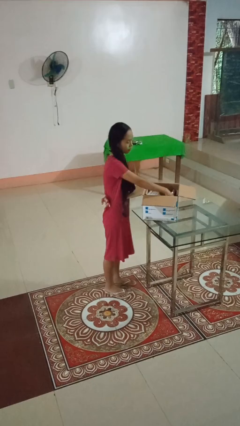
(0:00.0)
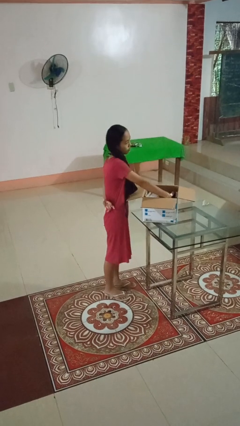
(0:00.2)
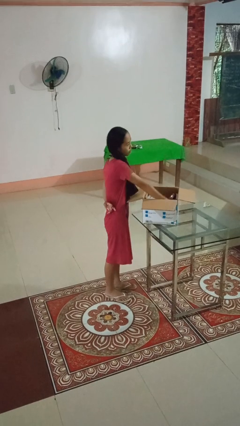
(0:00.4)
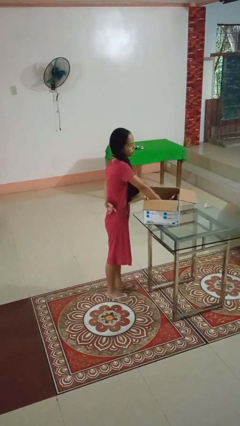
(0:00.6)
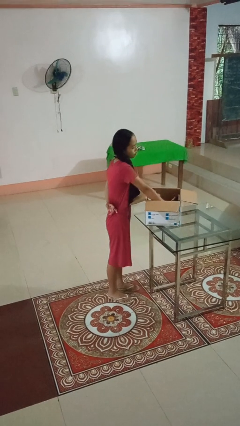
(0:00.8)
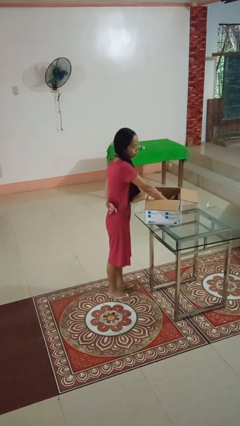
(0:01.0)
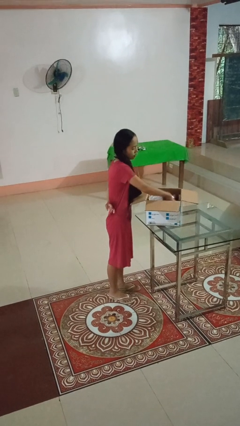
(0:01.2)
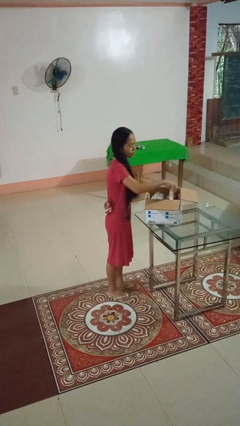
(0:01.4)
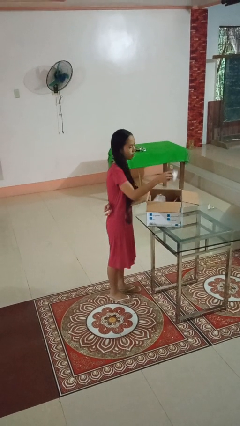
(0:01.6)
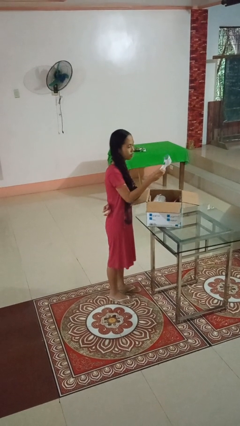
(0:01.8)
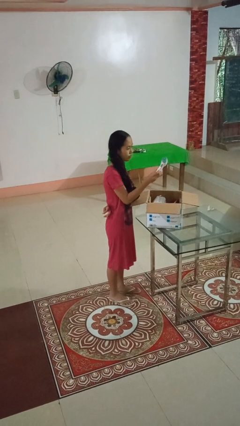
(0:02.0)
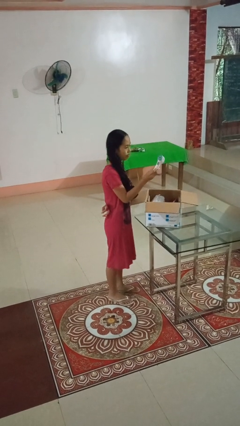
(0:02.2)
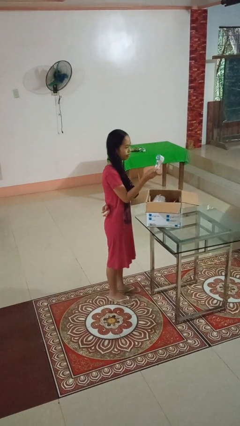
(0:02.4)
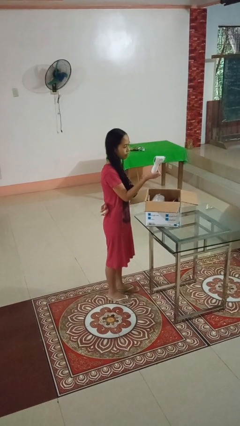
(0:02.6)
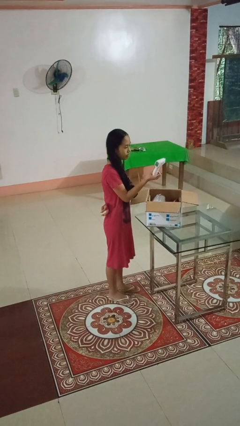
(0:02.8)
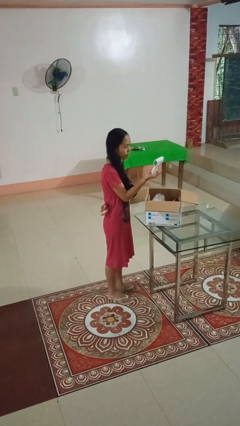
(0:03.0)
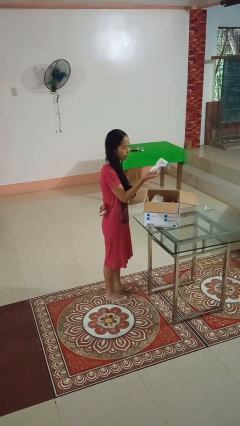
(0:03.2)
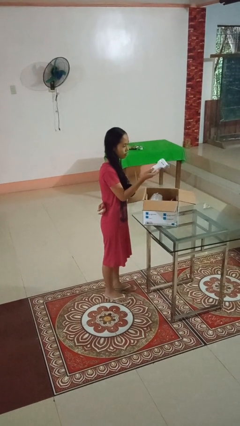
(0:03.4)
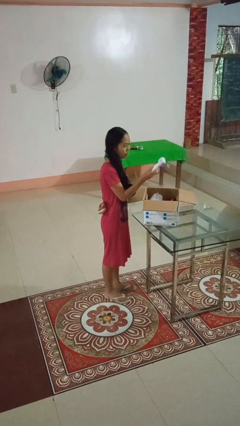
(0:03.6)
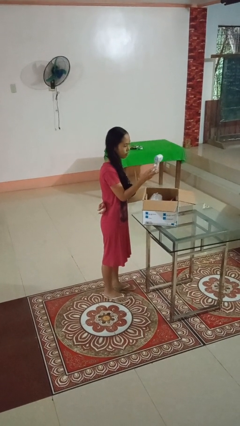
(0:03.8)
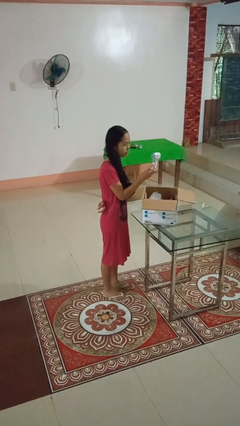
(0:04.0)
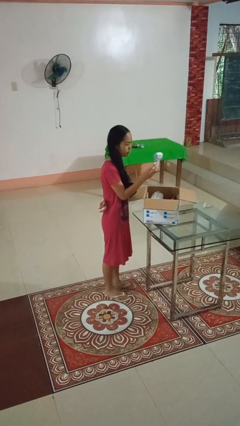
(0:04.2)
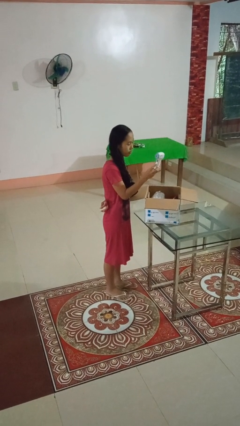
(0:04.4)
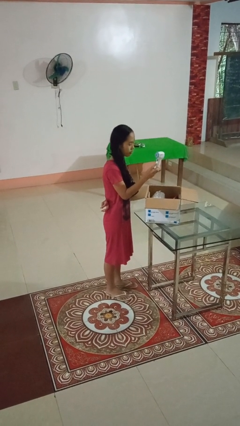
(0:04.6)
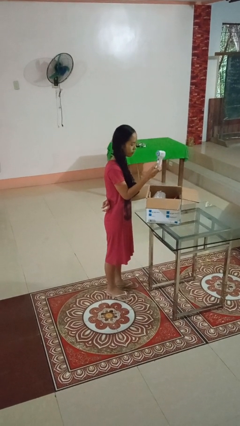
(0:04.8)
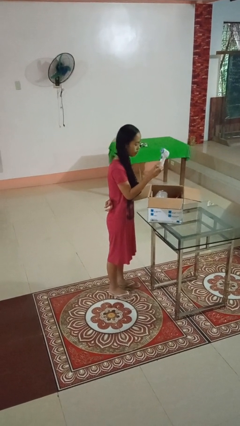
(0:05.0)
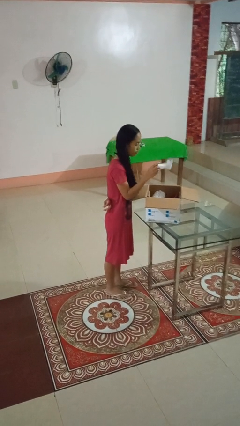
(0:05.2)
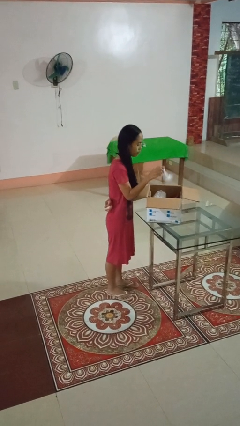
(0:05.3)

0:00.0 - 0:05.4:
person takes object from box

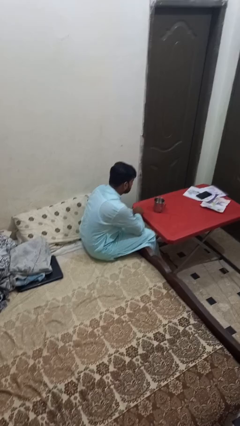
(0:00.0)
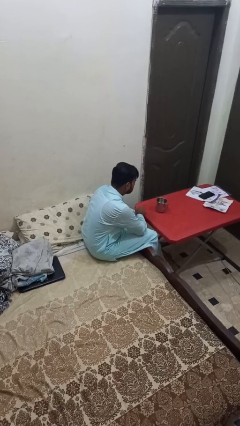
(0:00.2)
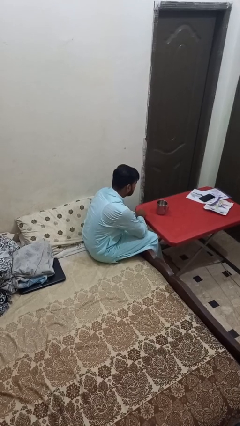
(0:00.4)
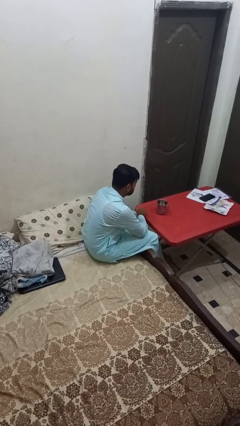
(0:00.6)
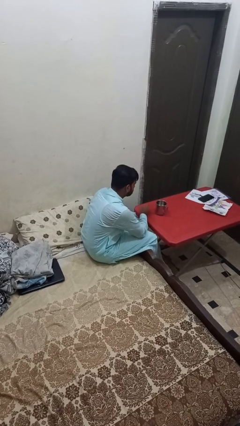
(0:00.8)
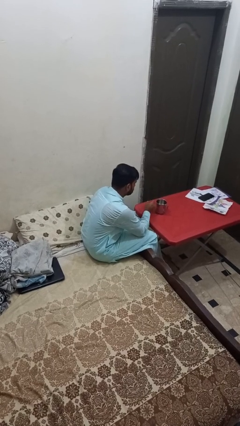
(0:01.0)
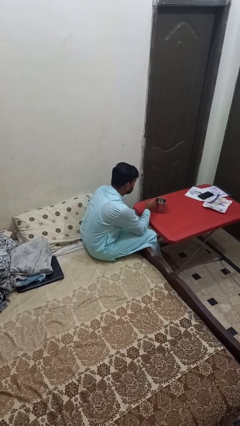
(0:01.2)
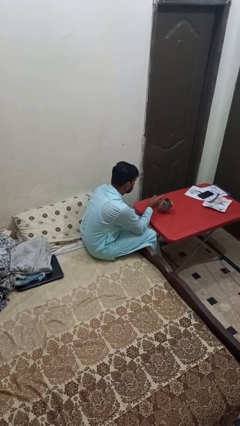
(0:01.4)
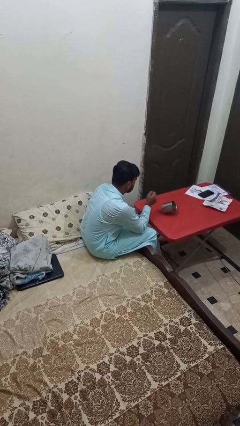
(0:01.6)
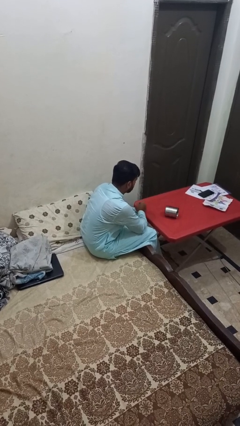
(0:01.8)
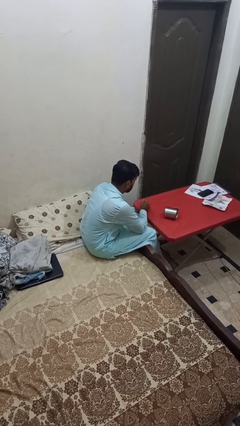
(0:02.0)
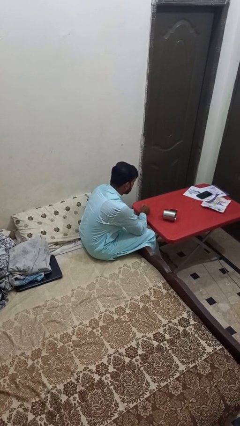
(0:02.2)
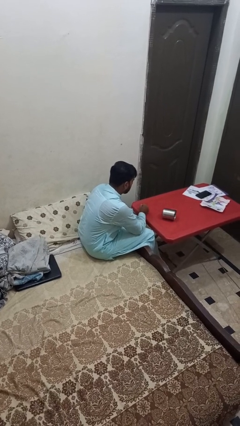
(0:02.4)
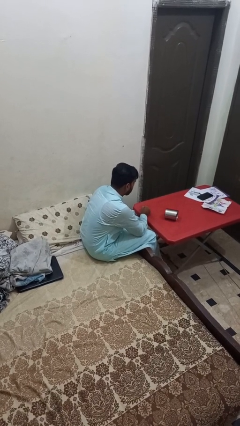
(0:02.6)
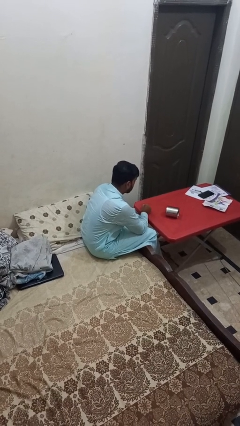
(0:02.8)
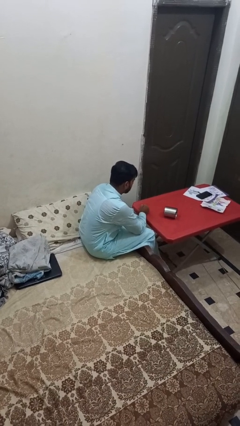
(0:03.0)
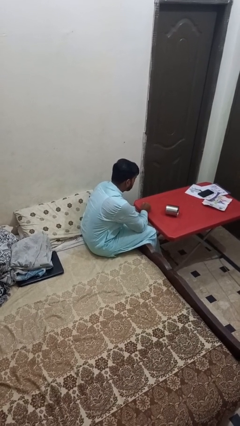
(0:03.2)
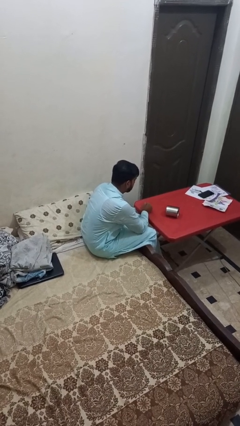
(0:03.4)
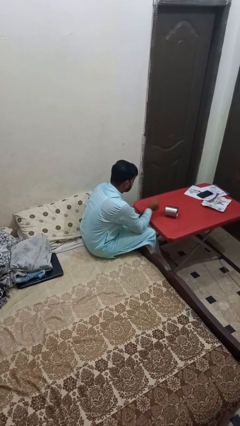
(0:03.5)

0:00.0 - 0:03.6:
person knocks over glass

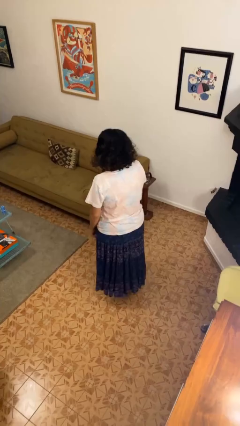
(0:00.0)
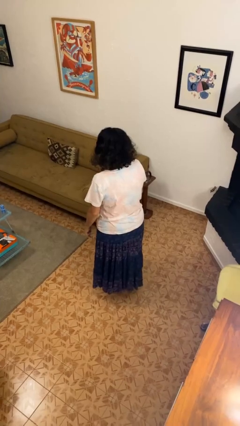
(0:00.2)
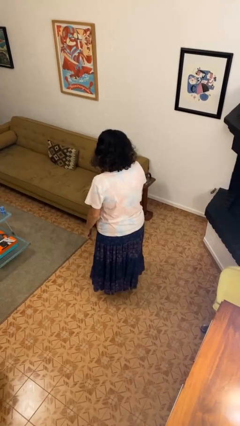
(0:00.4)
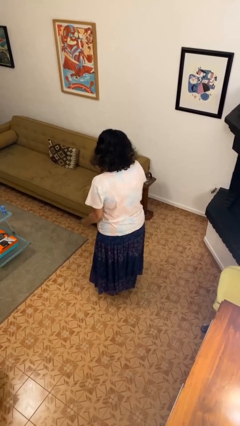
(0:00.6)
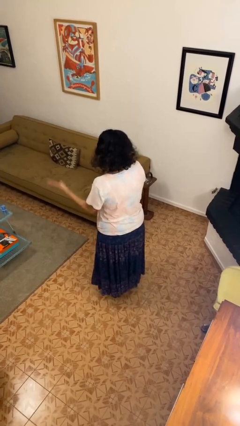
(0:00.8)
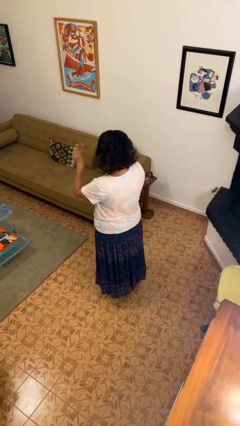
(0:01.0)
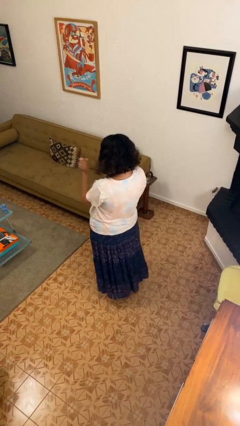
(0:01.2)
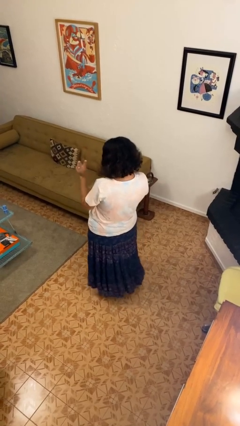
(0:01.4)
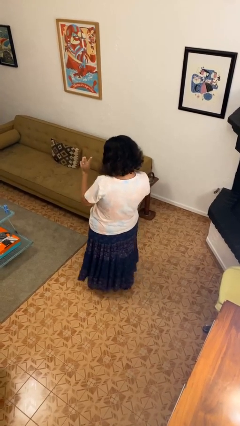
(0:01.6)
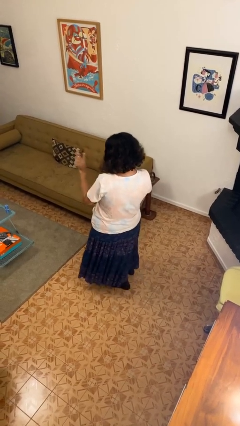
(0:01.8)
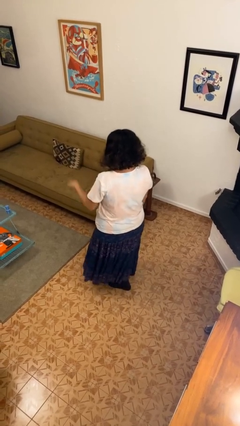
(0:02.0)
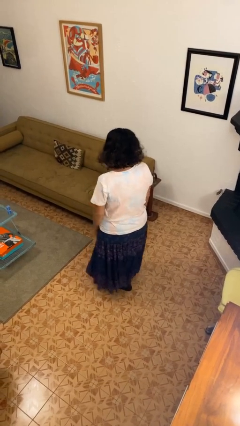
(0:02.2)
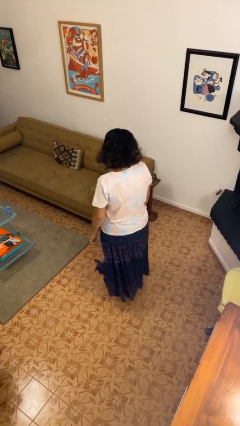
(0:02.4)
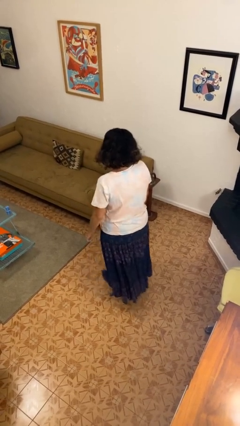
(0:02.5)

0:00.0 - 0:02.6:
person gestures peace

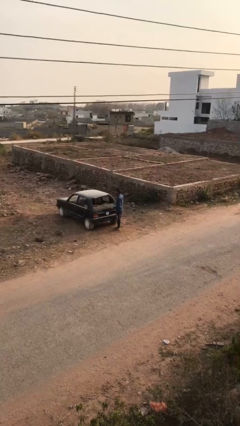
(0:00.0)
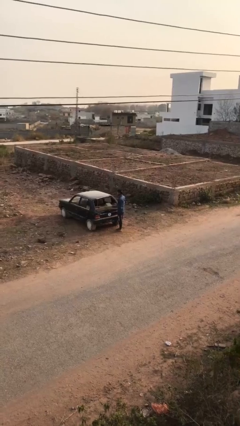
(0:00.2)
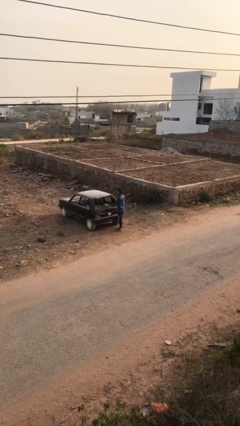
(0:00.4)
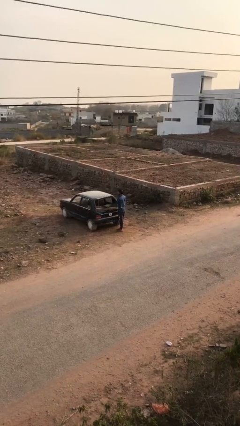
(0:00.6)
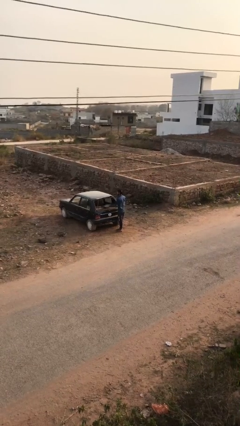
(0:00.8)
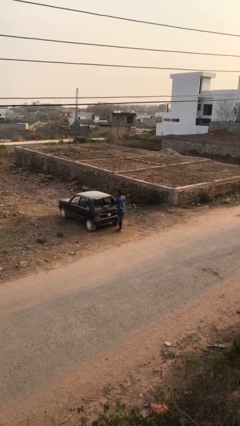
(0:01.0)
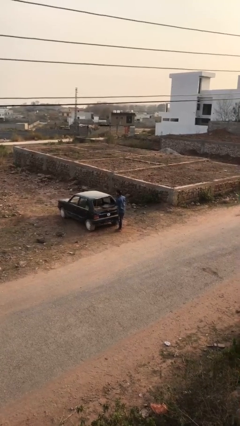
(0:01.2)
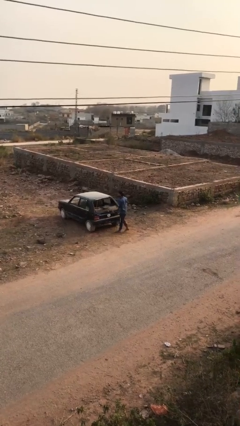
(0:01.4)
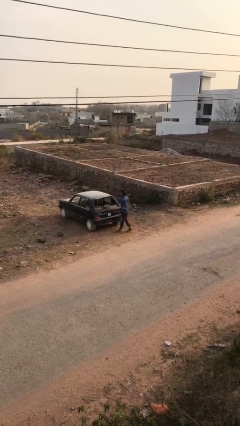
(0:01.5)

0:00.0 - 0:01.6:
person loads car

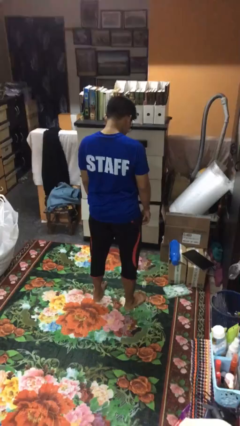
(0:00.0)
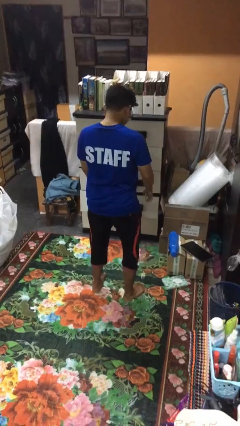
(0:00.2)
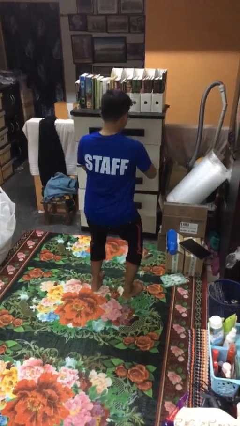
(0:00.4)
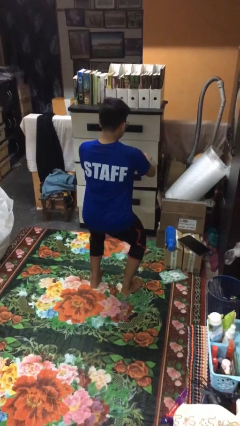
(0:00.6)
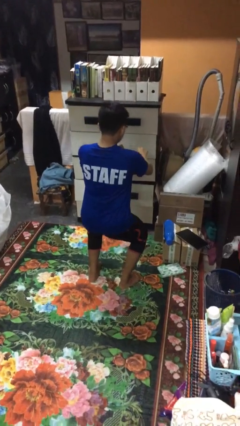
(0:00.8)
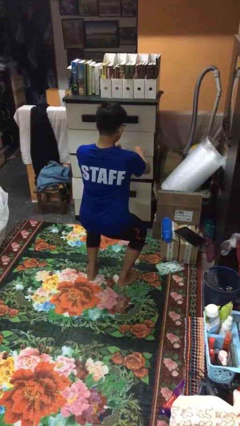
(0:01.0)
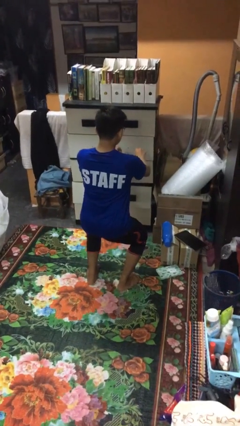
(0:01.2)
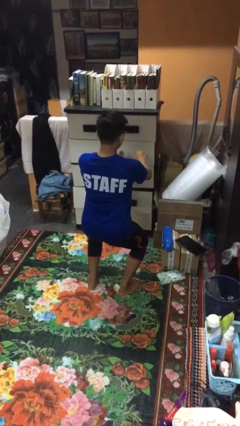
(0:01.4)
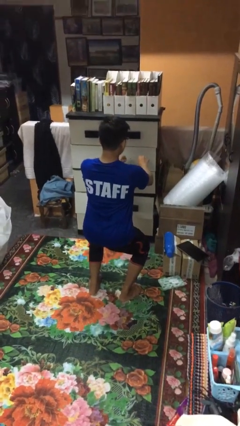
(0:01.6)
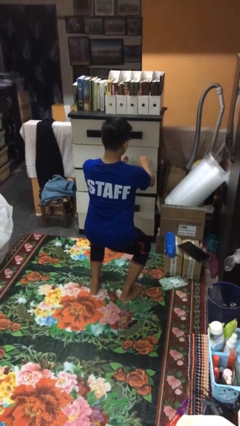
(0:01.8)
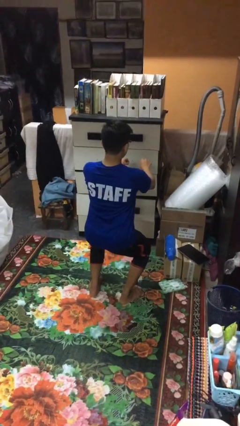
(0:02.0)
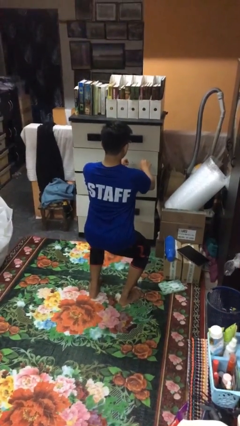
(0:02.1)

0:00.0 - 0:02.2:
person squats

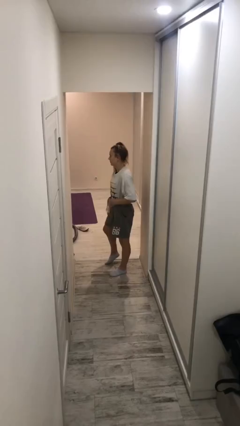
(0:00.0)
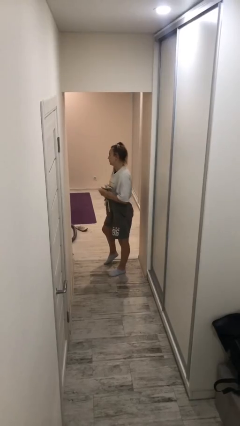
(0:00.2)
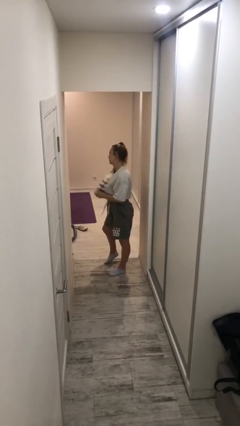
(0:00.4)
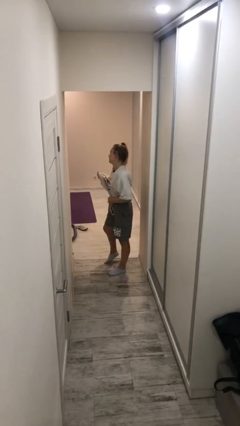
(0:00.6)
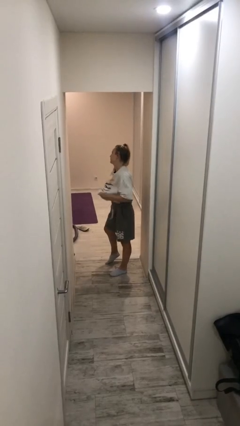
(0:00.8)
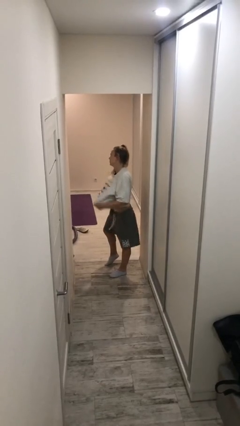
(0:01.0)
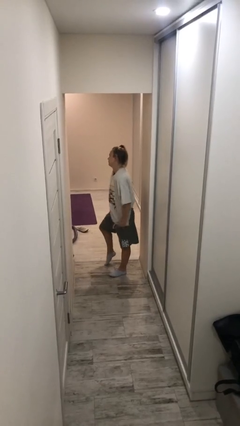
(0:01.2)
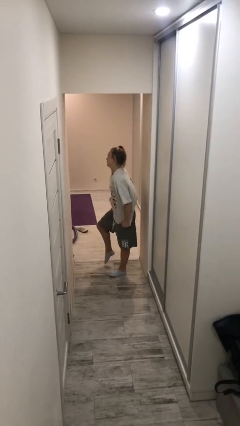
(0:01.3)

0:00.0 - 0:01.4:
person untucks shirt

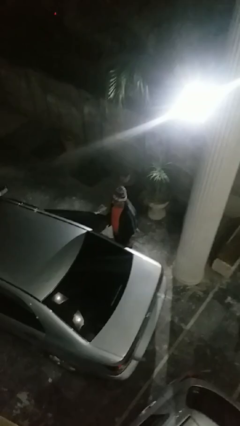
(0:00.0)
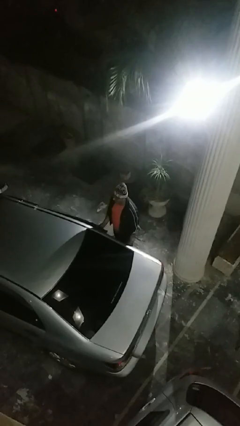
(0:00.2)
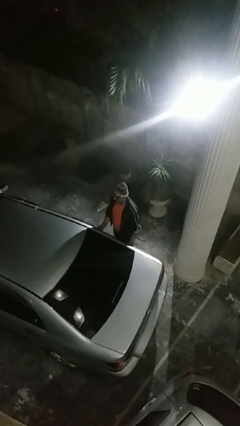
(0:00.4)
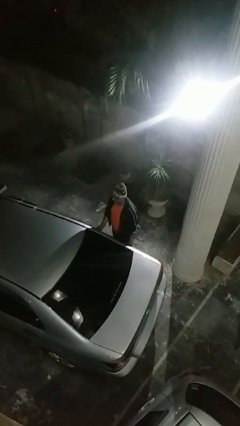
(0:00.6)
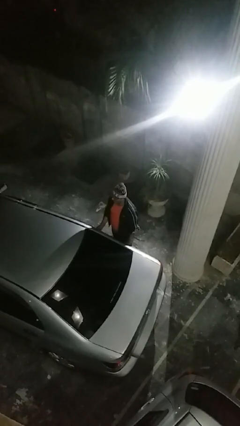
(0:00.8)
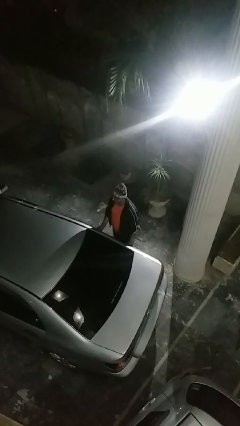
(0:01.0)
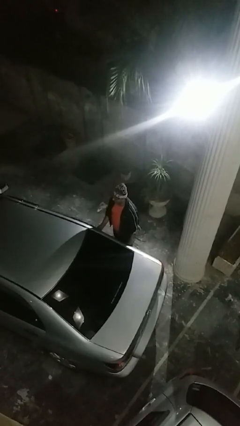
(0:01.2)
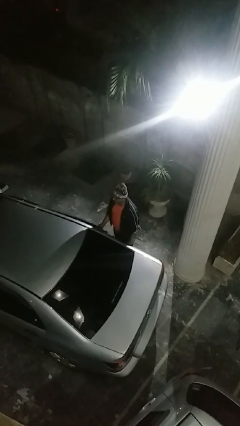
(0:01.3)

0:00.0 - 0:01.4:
person closes car door
